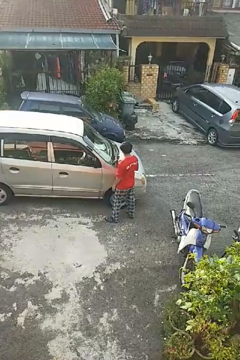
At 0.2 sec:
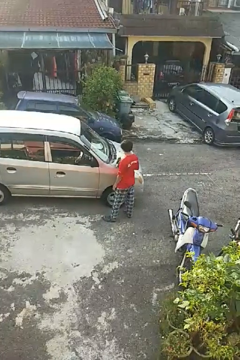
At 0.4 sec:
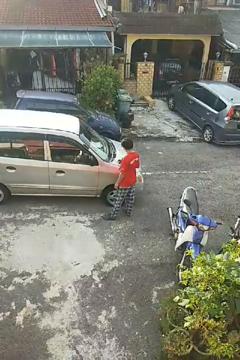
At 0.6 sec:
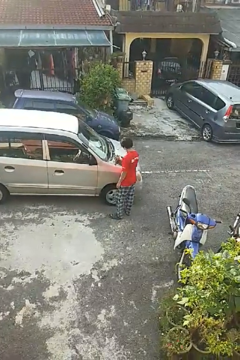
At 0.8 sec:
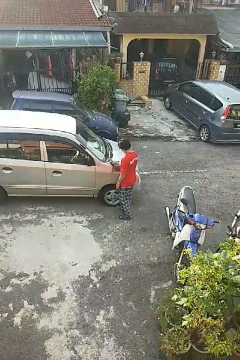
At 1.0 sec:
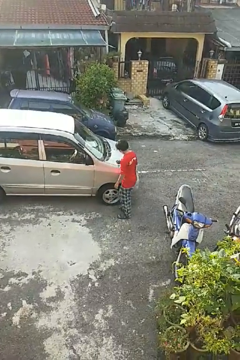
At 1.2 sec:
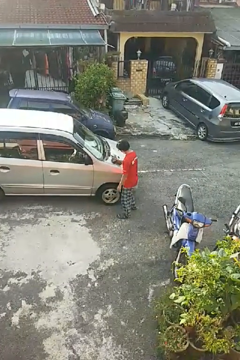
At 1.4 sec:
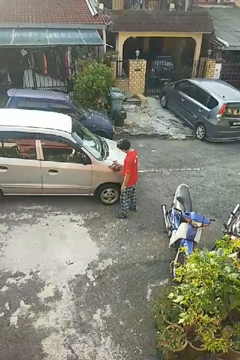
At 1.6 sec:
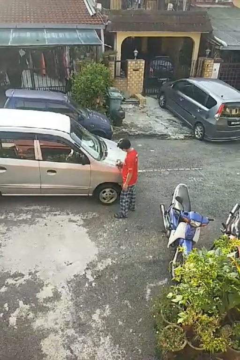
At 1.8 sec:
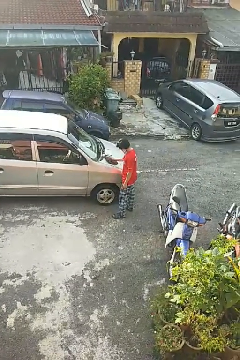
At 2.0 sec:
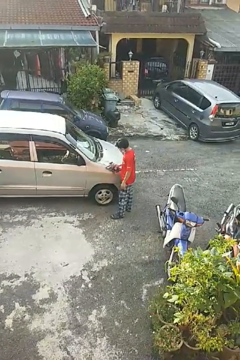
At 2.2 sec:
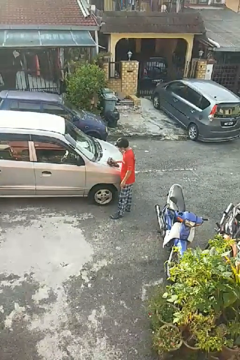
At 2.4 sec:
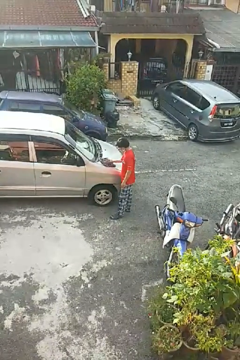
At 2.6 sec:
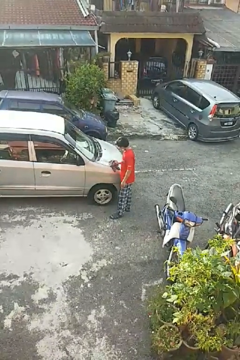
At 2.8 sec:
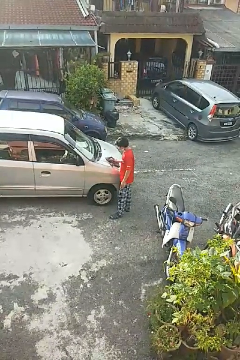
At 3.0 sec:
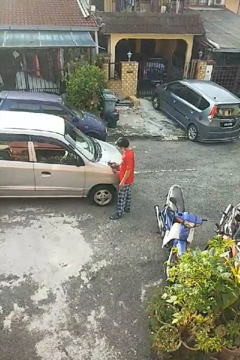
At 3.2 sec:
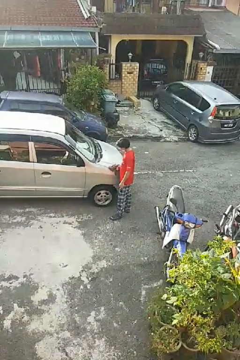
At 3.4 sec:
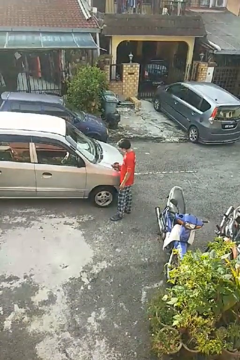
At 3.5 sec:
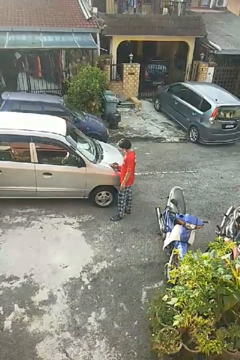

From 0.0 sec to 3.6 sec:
person polishes car with rag

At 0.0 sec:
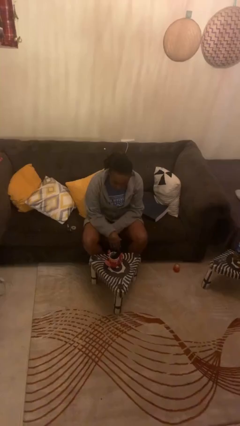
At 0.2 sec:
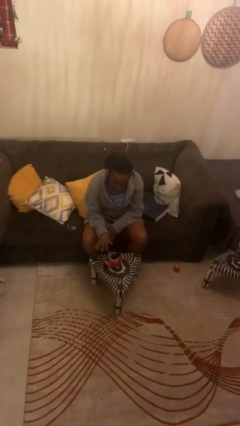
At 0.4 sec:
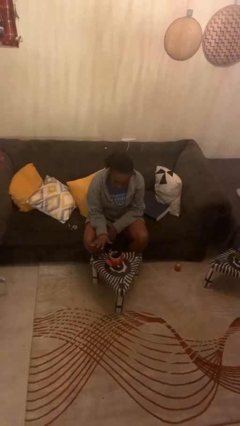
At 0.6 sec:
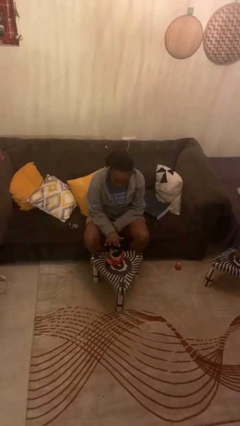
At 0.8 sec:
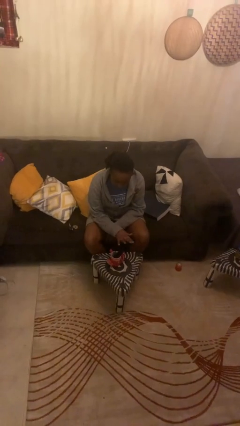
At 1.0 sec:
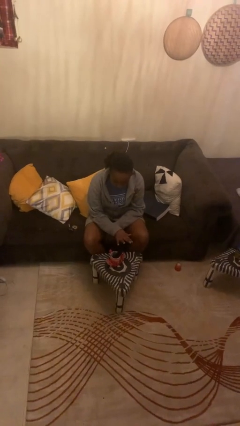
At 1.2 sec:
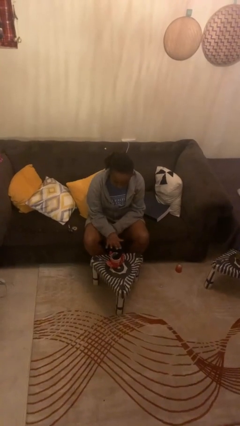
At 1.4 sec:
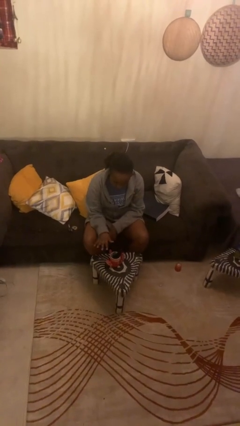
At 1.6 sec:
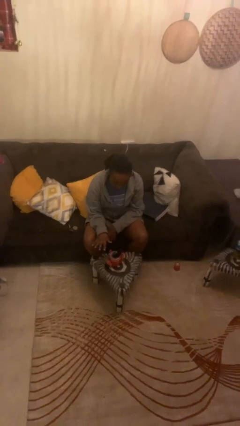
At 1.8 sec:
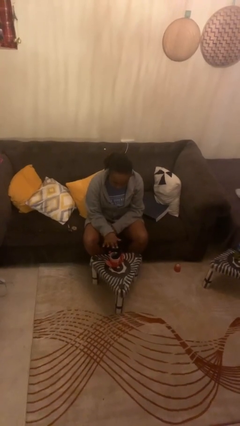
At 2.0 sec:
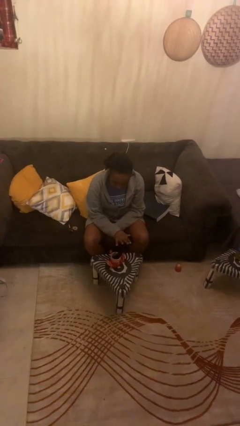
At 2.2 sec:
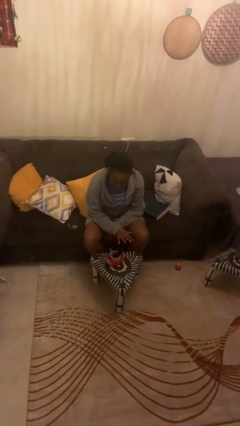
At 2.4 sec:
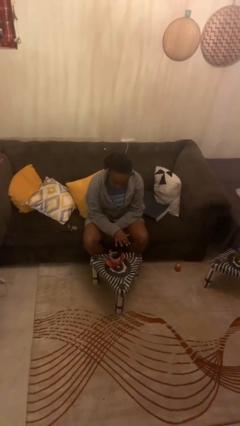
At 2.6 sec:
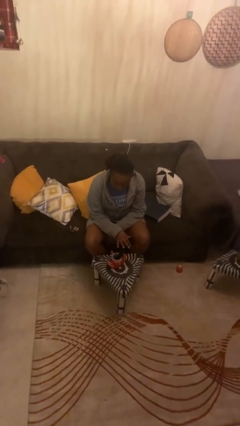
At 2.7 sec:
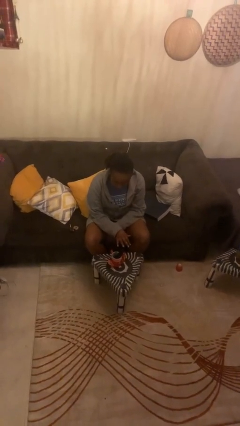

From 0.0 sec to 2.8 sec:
person waves hand over object

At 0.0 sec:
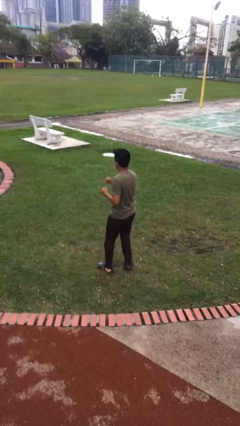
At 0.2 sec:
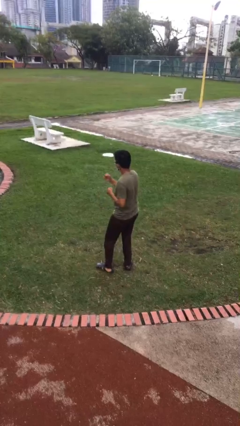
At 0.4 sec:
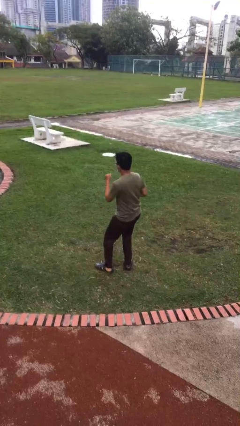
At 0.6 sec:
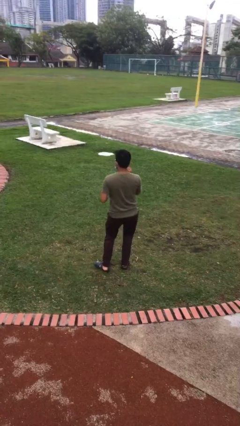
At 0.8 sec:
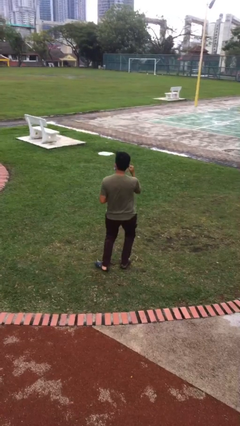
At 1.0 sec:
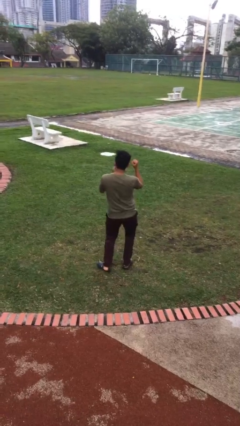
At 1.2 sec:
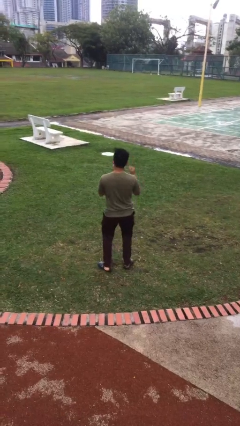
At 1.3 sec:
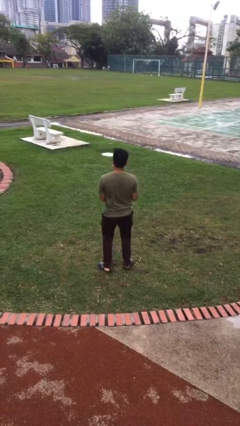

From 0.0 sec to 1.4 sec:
person dances in place

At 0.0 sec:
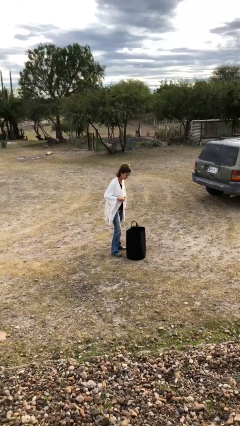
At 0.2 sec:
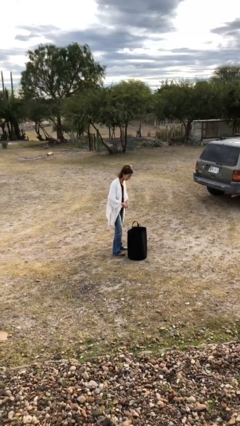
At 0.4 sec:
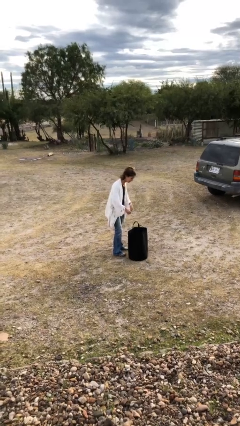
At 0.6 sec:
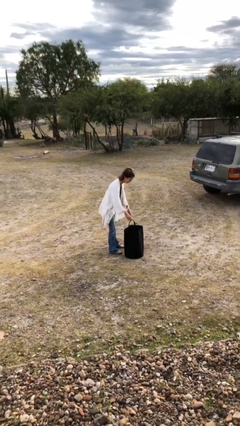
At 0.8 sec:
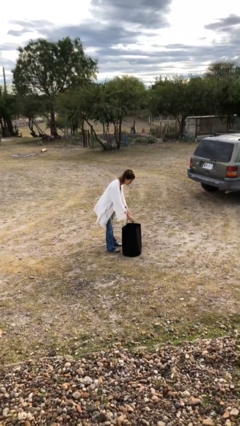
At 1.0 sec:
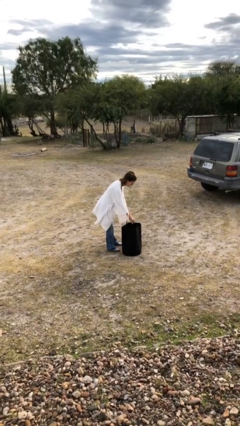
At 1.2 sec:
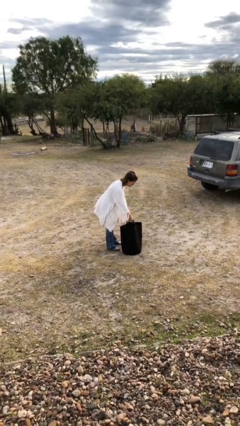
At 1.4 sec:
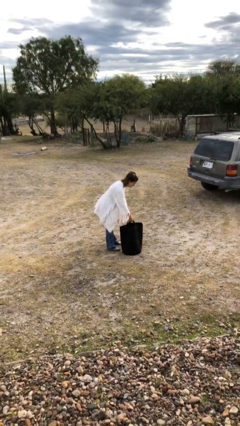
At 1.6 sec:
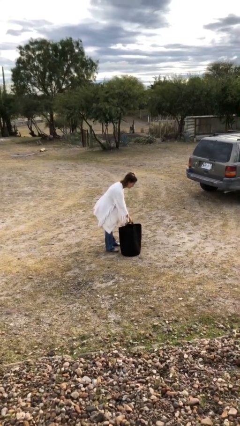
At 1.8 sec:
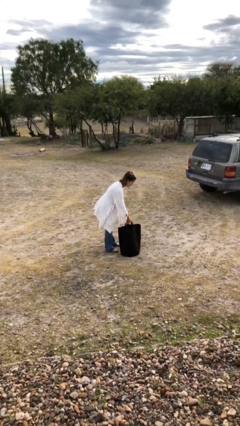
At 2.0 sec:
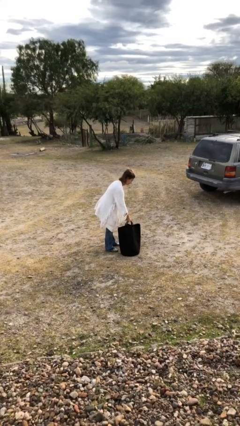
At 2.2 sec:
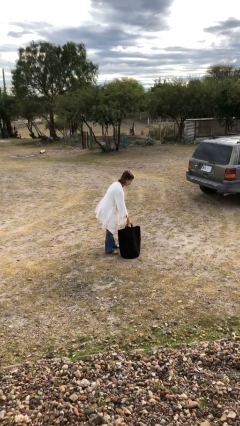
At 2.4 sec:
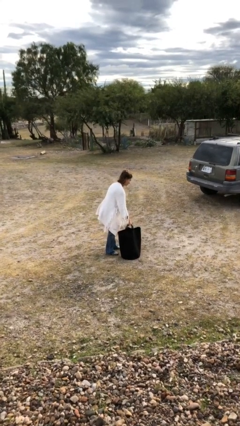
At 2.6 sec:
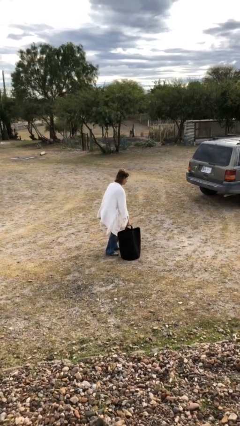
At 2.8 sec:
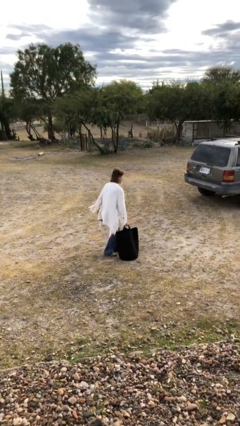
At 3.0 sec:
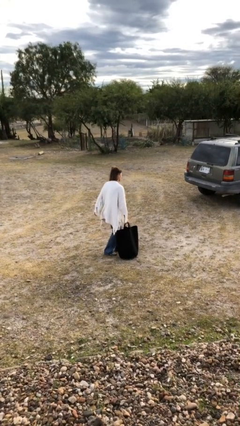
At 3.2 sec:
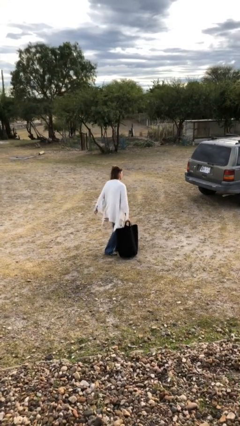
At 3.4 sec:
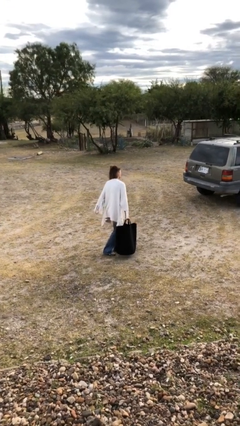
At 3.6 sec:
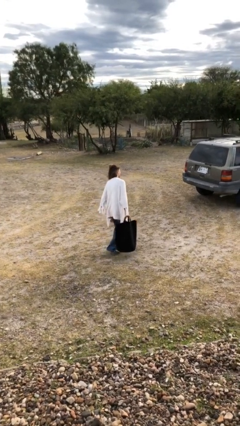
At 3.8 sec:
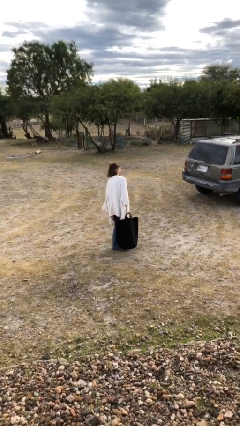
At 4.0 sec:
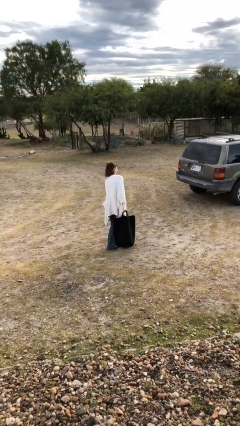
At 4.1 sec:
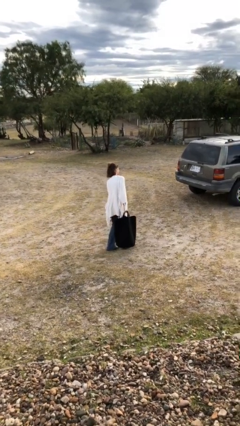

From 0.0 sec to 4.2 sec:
person picks up object from floor

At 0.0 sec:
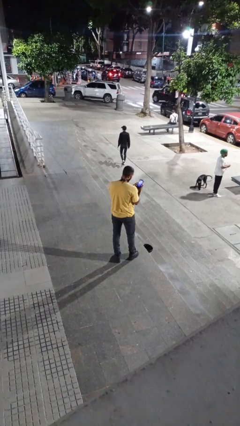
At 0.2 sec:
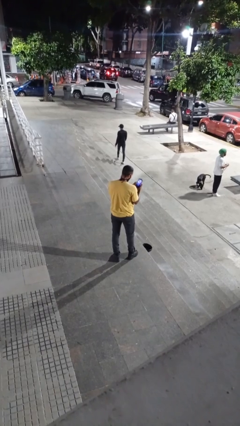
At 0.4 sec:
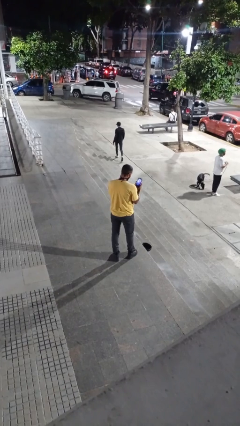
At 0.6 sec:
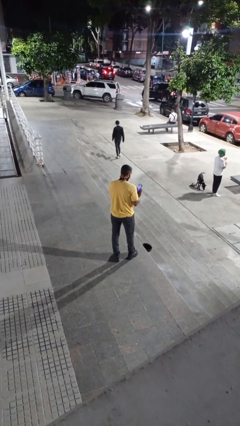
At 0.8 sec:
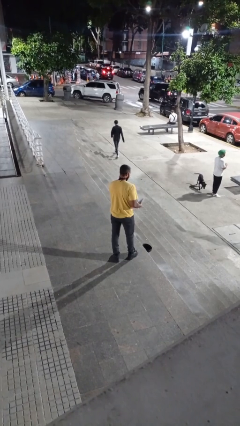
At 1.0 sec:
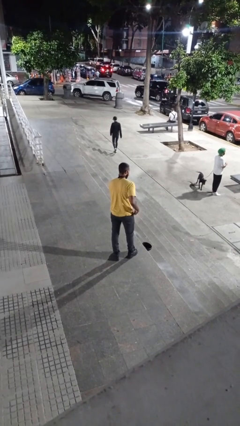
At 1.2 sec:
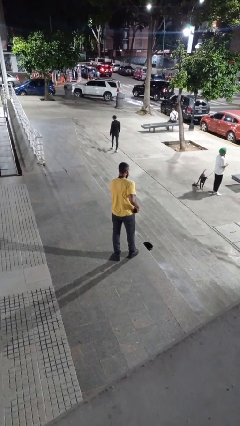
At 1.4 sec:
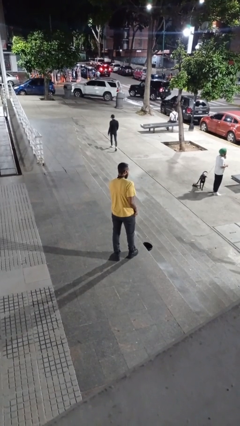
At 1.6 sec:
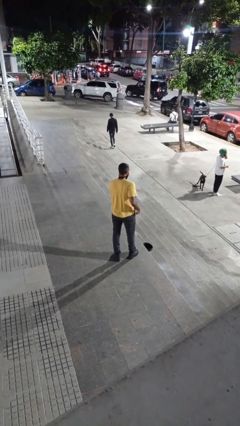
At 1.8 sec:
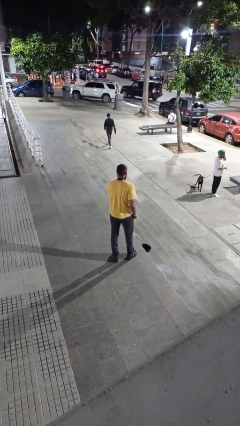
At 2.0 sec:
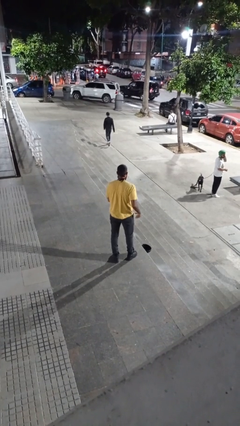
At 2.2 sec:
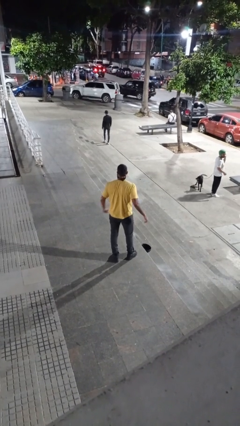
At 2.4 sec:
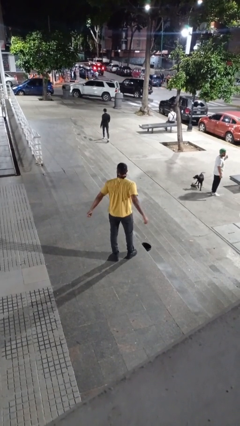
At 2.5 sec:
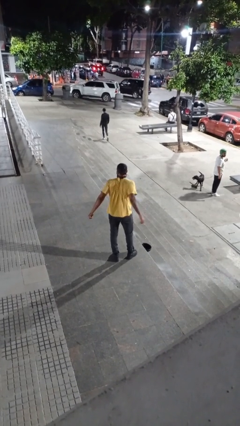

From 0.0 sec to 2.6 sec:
person puts phone into pocket

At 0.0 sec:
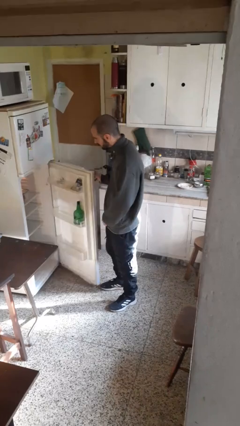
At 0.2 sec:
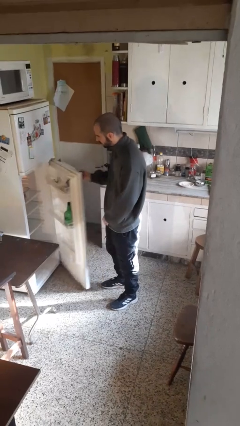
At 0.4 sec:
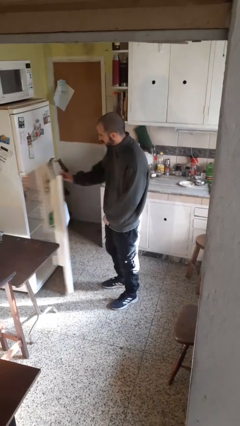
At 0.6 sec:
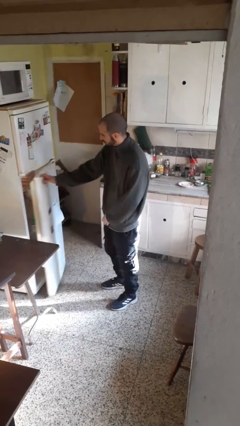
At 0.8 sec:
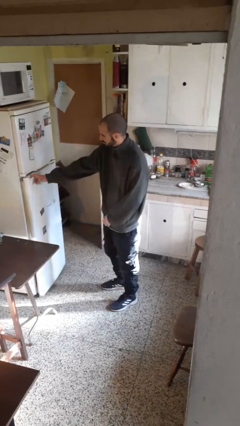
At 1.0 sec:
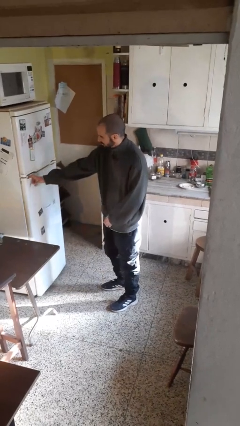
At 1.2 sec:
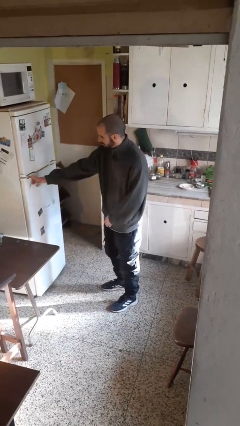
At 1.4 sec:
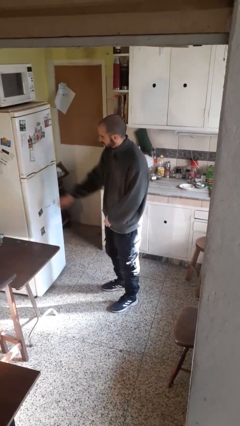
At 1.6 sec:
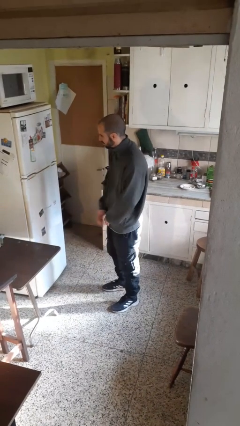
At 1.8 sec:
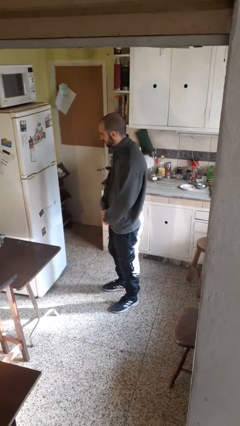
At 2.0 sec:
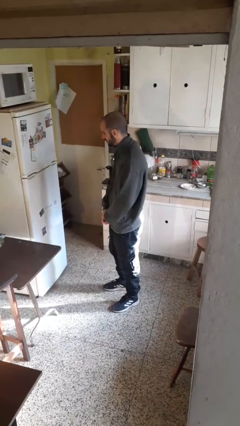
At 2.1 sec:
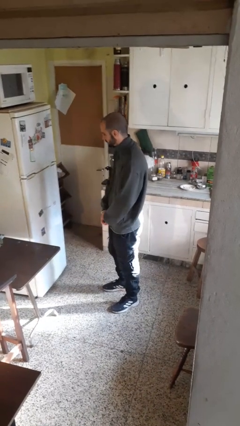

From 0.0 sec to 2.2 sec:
person closes refrigerator

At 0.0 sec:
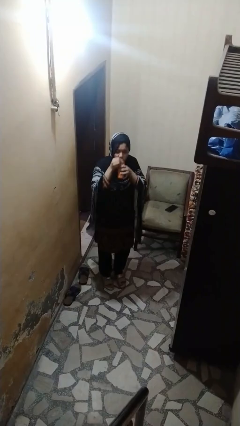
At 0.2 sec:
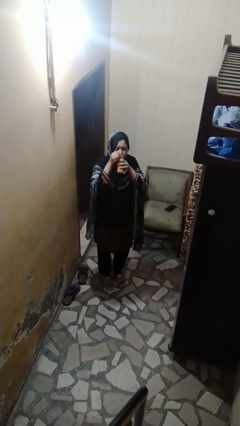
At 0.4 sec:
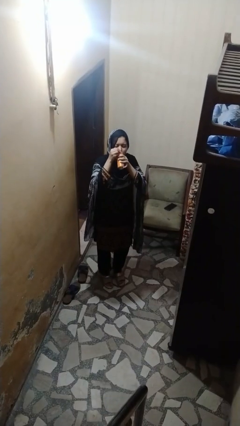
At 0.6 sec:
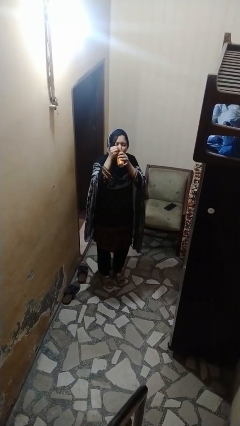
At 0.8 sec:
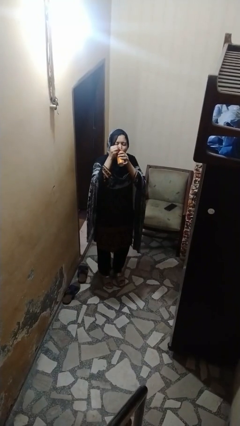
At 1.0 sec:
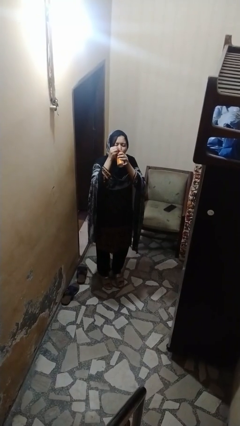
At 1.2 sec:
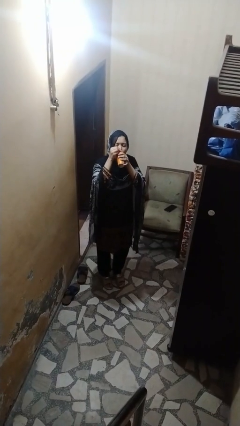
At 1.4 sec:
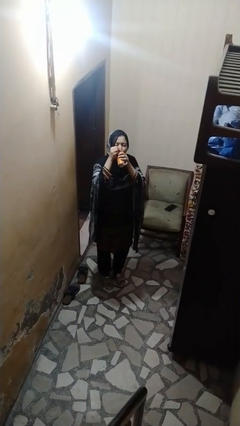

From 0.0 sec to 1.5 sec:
person drinks from beverage can
